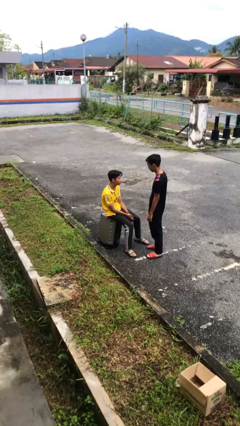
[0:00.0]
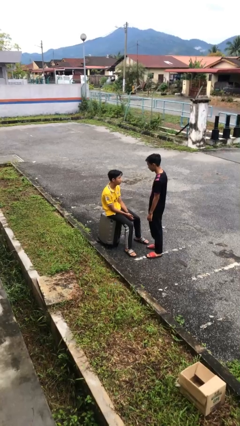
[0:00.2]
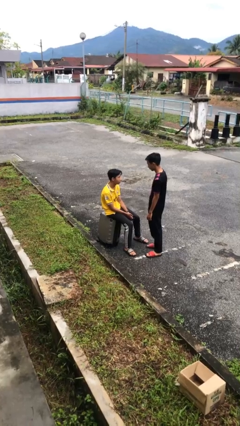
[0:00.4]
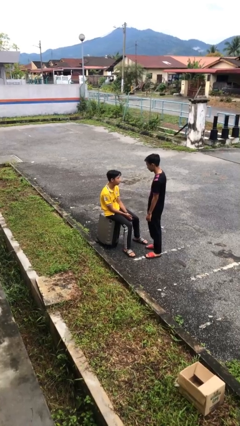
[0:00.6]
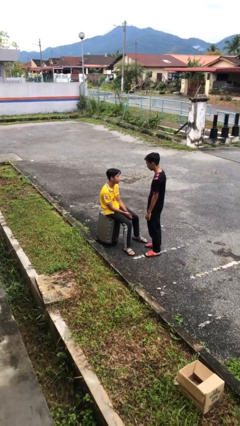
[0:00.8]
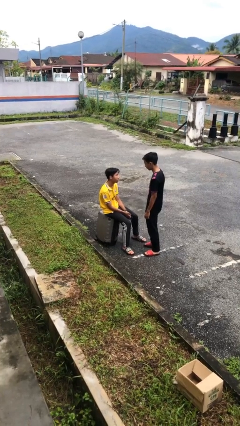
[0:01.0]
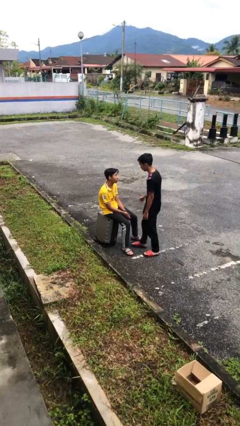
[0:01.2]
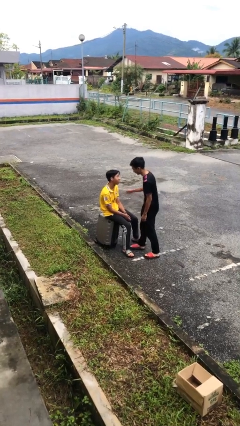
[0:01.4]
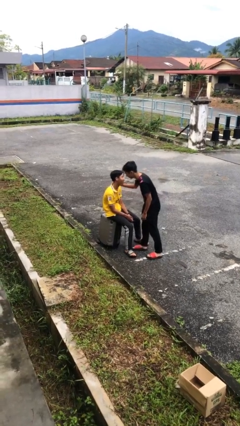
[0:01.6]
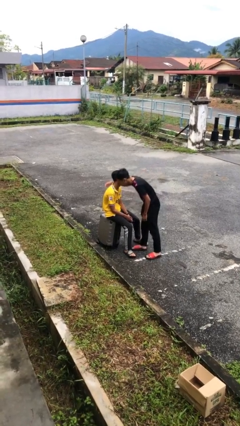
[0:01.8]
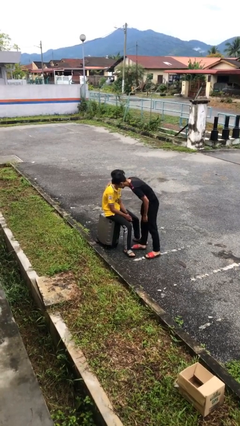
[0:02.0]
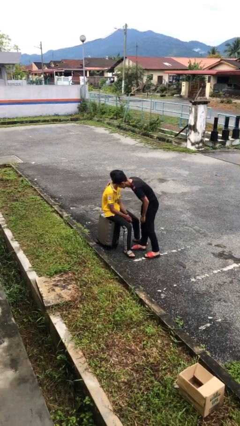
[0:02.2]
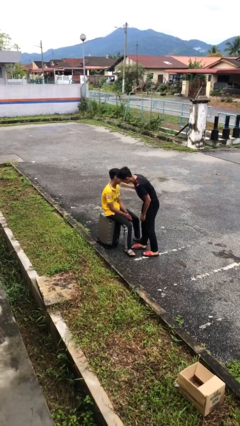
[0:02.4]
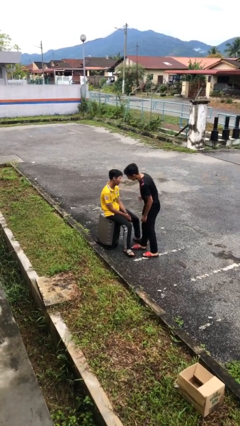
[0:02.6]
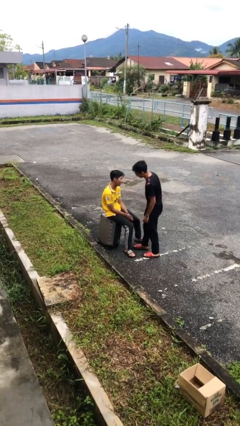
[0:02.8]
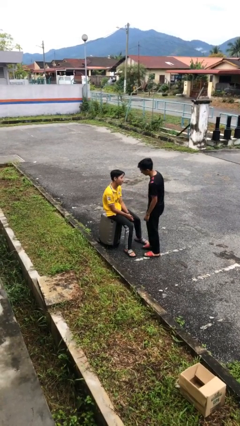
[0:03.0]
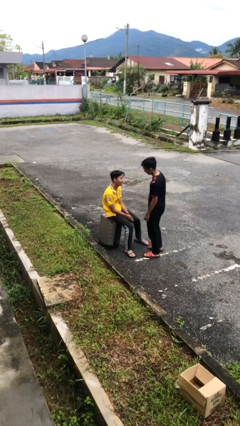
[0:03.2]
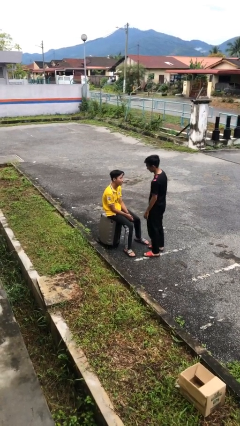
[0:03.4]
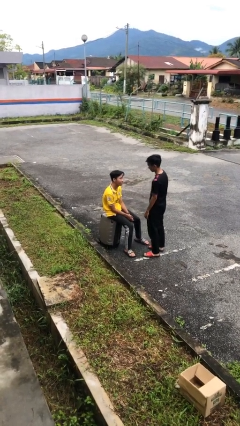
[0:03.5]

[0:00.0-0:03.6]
person embraces person

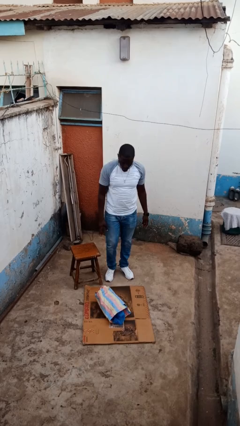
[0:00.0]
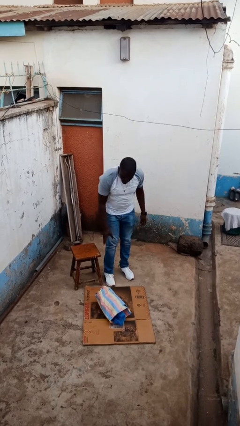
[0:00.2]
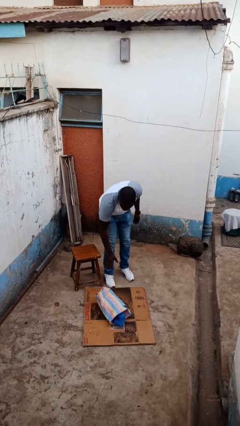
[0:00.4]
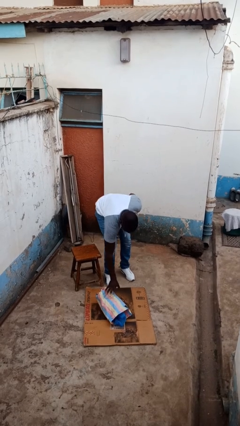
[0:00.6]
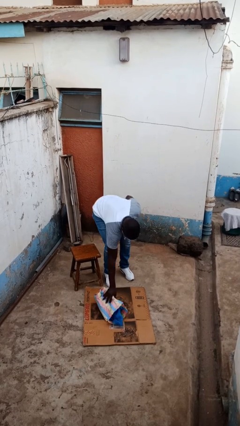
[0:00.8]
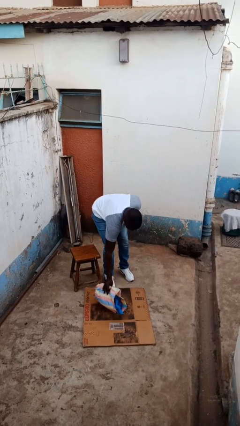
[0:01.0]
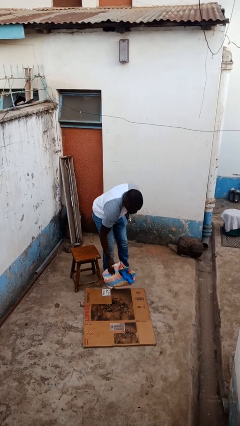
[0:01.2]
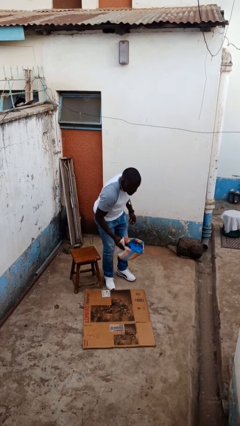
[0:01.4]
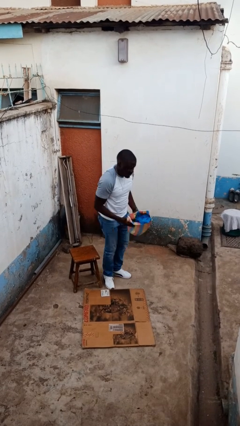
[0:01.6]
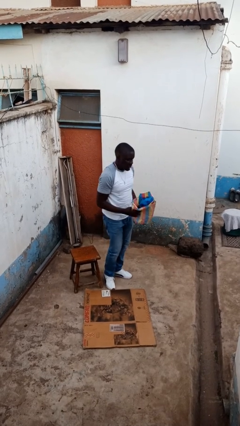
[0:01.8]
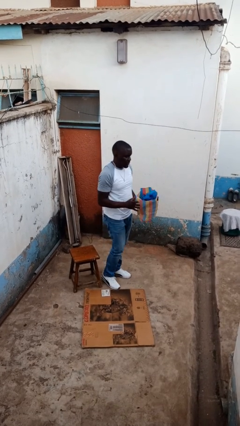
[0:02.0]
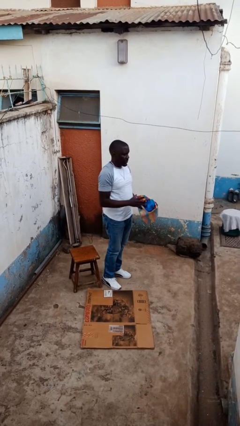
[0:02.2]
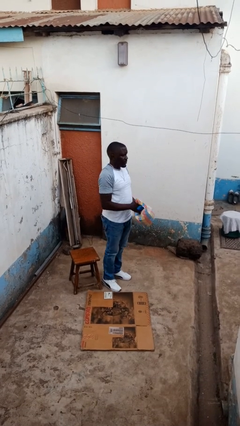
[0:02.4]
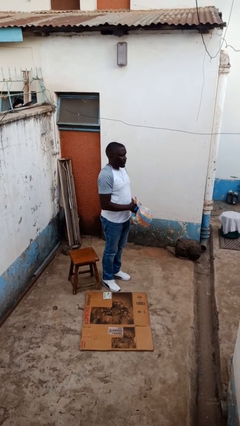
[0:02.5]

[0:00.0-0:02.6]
person picks up object from floor

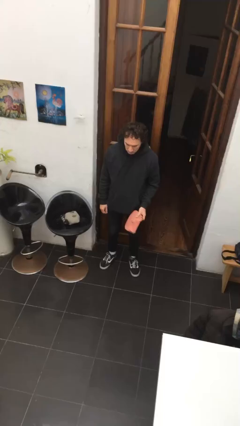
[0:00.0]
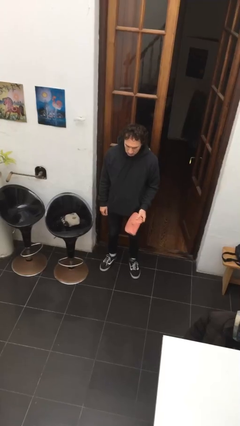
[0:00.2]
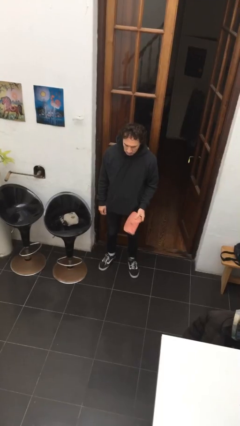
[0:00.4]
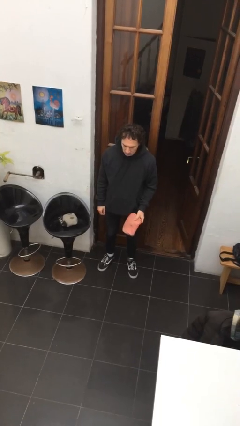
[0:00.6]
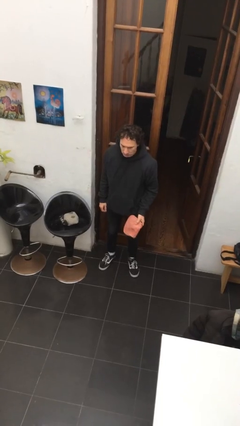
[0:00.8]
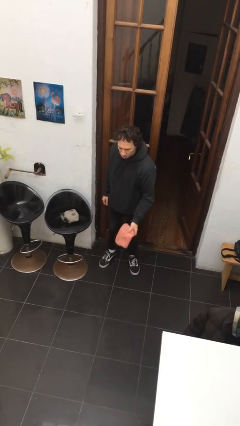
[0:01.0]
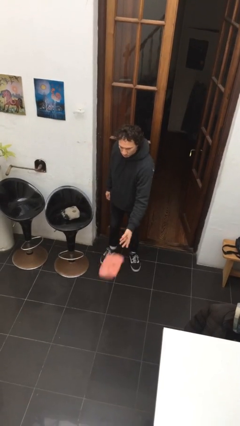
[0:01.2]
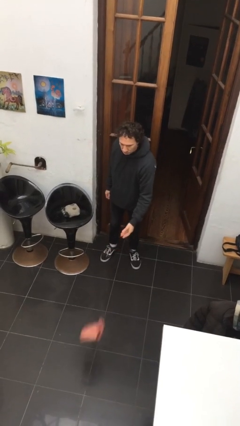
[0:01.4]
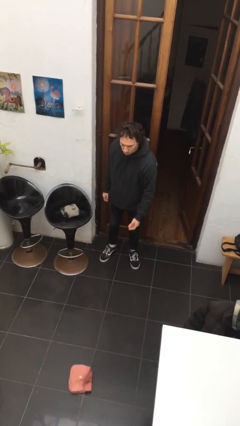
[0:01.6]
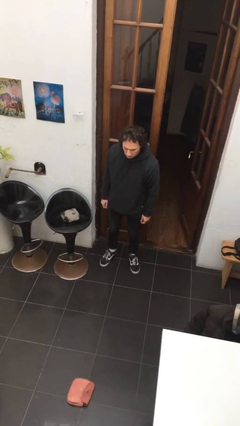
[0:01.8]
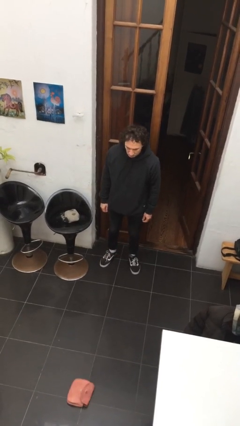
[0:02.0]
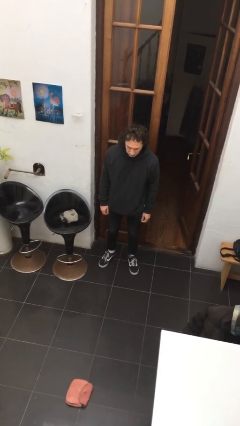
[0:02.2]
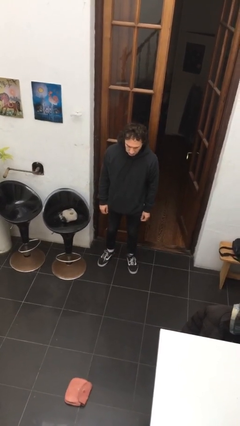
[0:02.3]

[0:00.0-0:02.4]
person throws object to ground

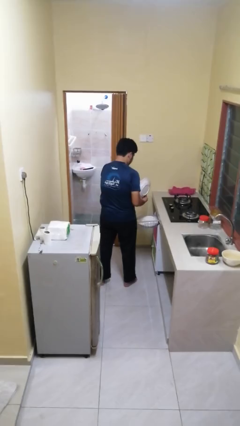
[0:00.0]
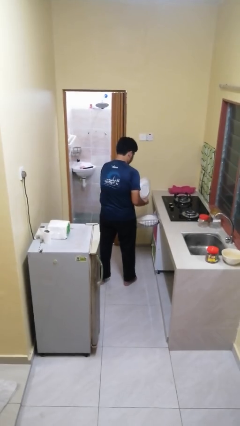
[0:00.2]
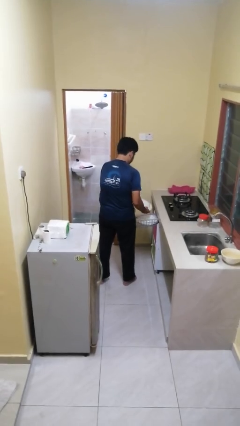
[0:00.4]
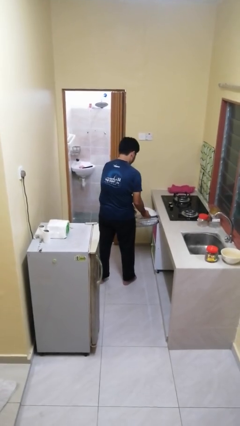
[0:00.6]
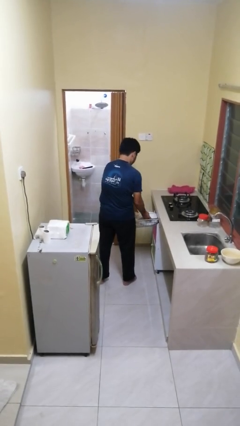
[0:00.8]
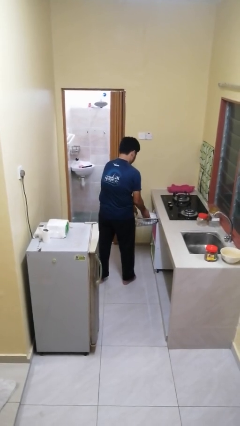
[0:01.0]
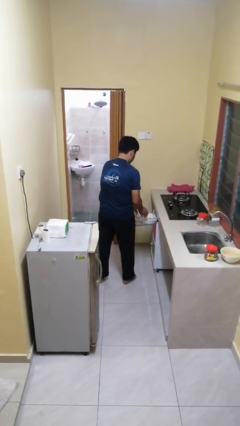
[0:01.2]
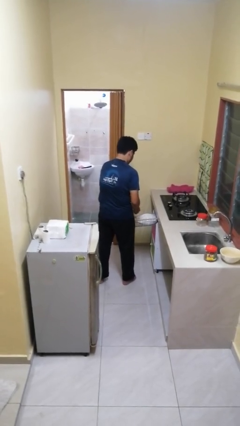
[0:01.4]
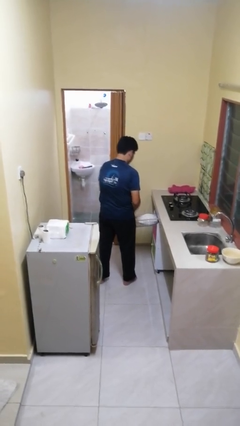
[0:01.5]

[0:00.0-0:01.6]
person puts object into kitchen drawer

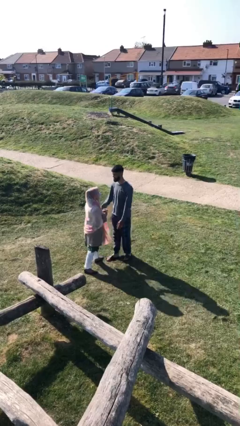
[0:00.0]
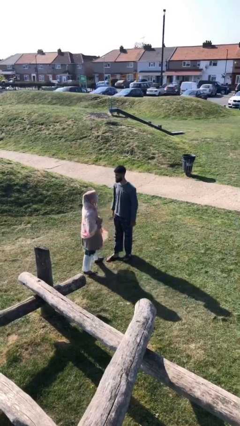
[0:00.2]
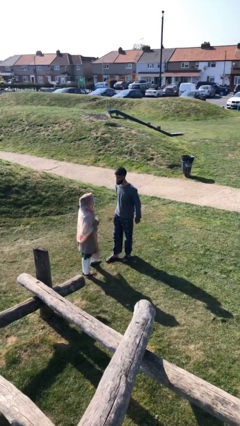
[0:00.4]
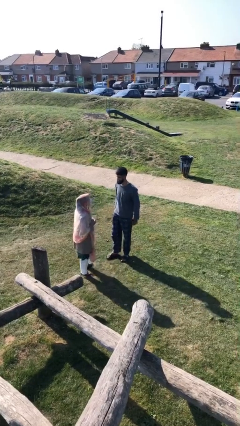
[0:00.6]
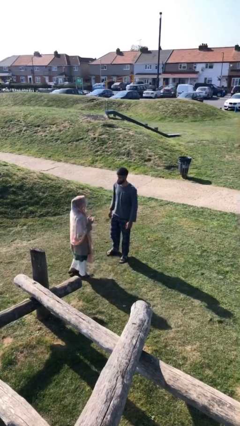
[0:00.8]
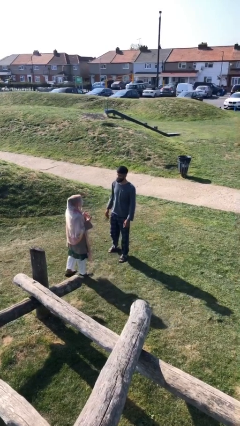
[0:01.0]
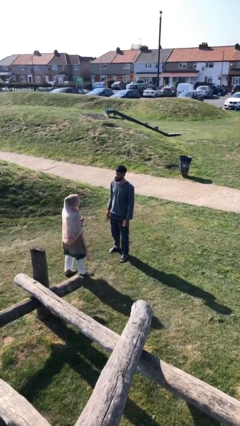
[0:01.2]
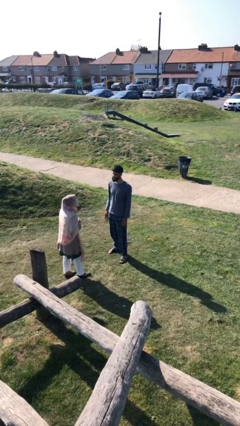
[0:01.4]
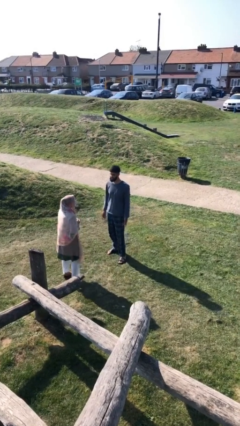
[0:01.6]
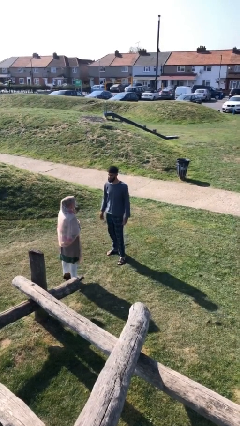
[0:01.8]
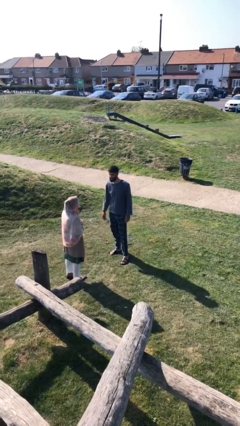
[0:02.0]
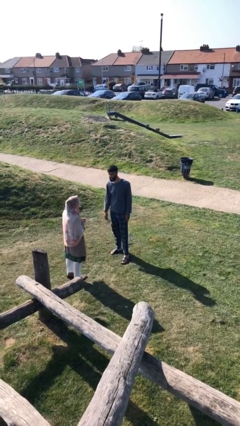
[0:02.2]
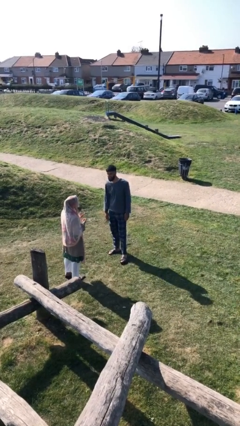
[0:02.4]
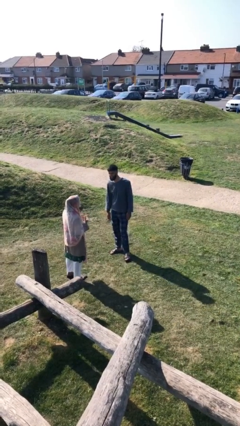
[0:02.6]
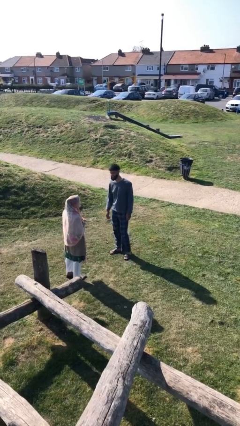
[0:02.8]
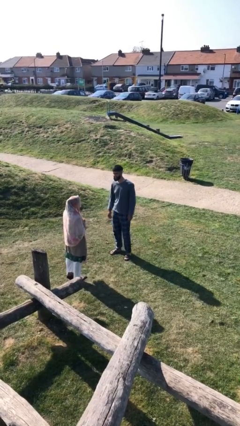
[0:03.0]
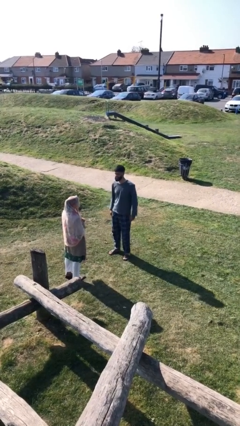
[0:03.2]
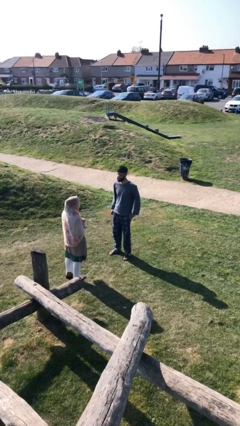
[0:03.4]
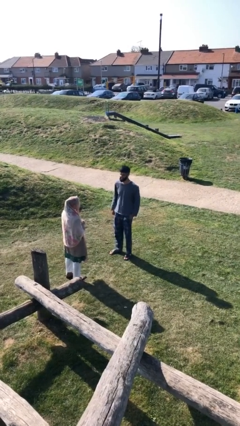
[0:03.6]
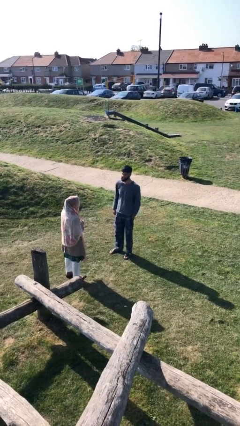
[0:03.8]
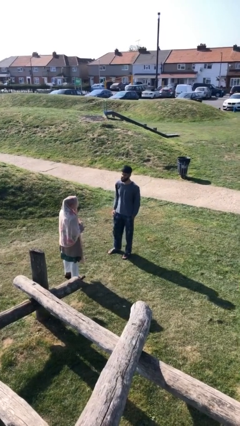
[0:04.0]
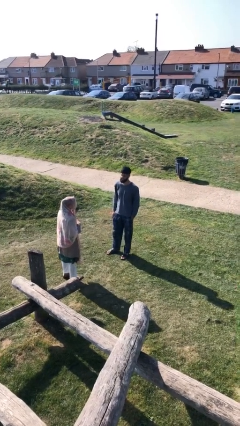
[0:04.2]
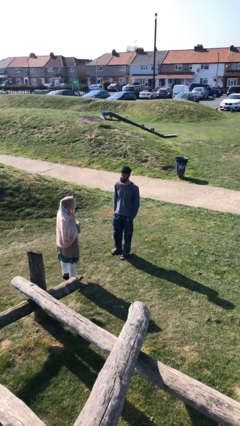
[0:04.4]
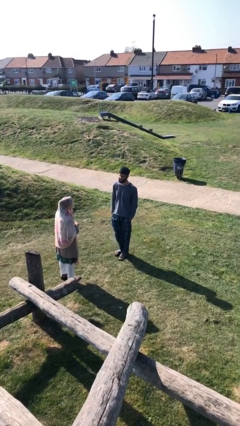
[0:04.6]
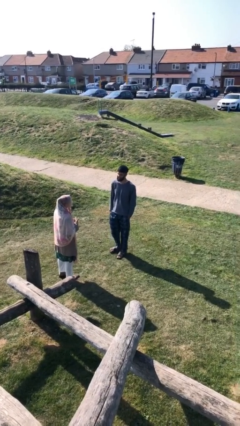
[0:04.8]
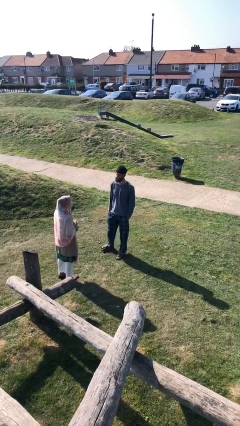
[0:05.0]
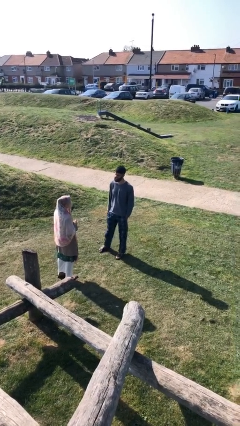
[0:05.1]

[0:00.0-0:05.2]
person talks to person

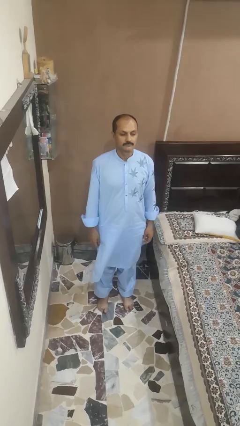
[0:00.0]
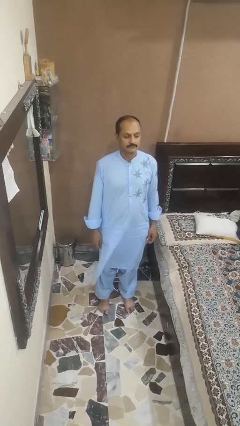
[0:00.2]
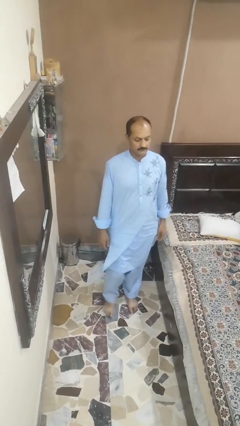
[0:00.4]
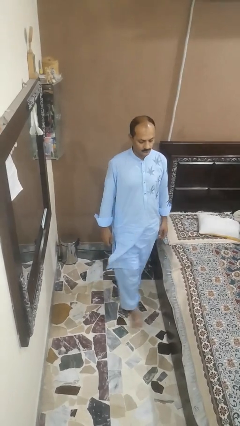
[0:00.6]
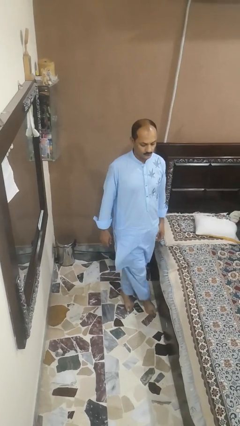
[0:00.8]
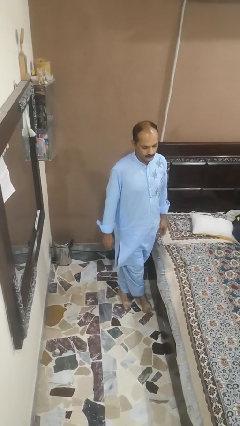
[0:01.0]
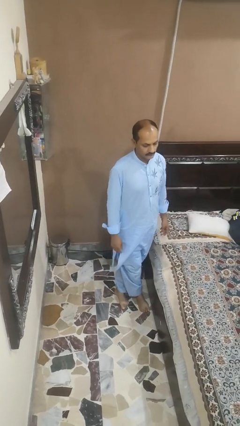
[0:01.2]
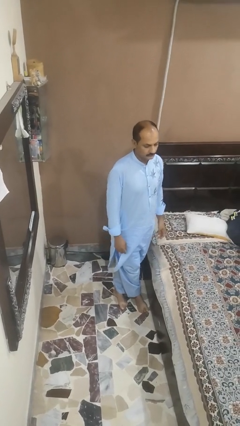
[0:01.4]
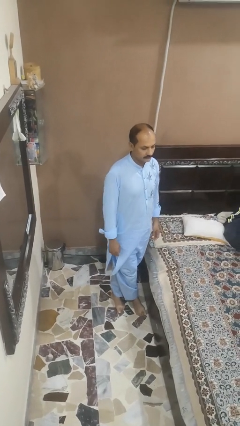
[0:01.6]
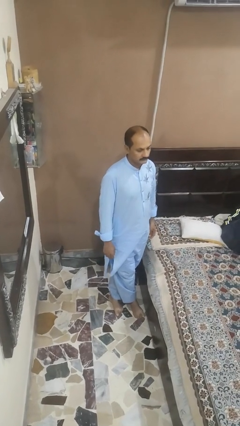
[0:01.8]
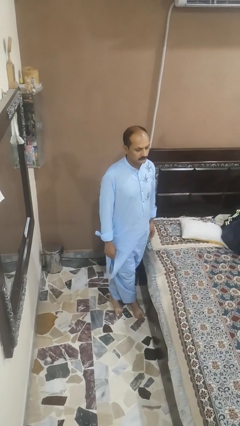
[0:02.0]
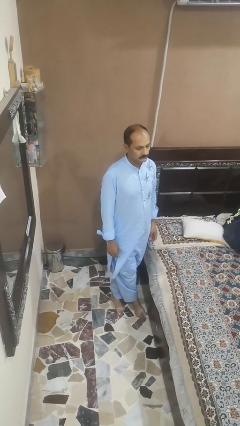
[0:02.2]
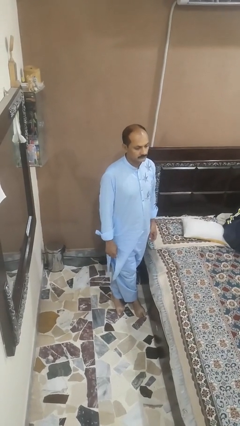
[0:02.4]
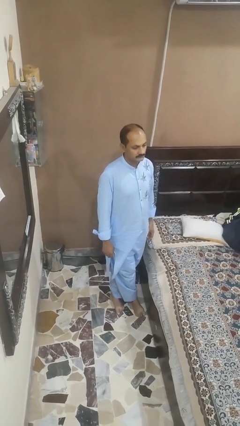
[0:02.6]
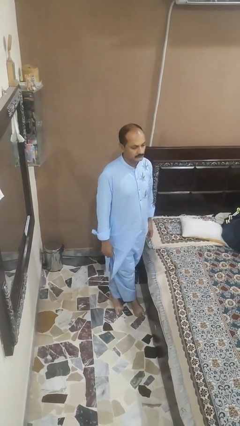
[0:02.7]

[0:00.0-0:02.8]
person crosses legs
